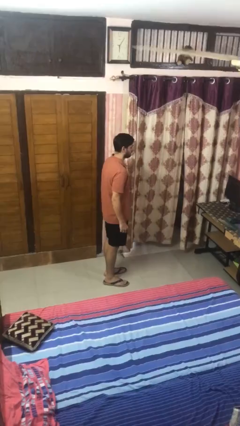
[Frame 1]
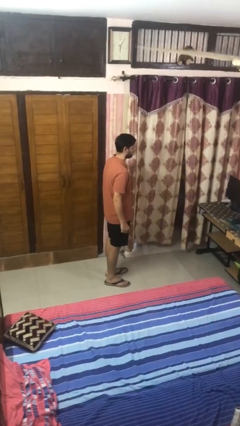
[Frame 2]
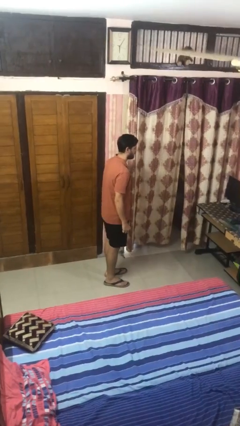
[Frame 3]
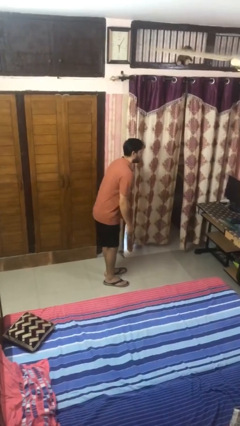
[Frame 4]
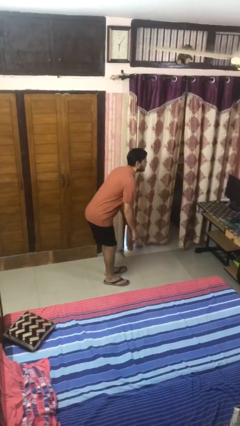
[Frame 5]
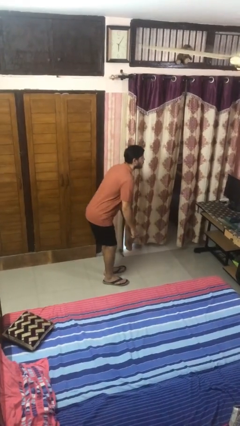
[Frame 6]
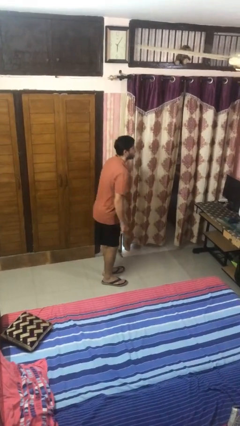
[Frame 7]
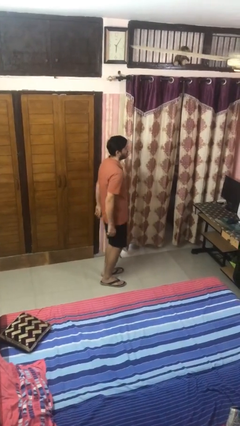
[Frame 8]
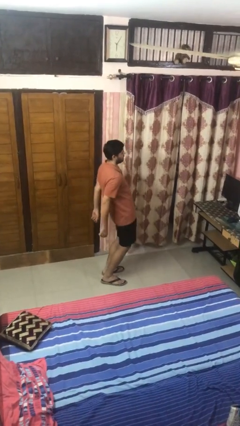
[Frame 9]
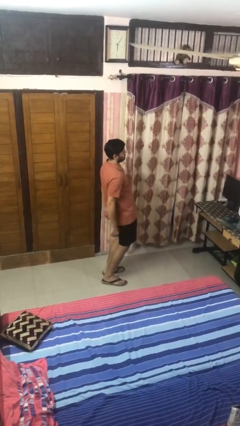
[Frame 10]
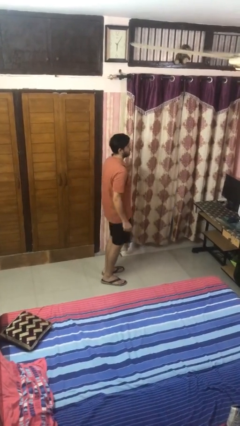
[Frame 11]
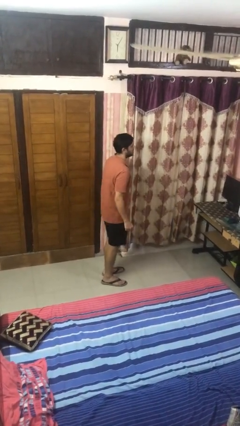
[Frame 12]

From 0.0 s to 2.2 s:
person wiggles hips

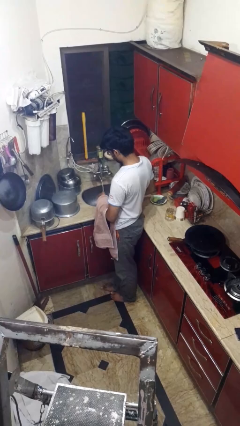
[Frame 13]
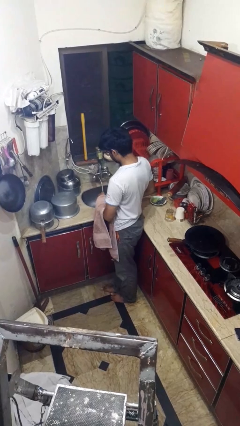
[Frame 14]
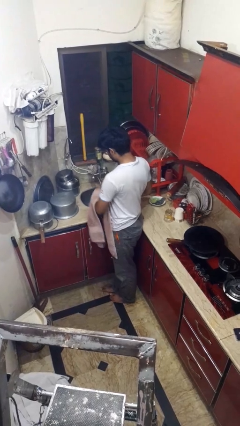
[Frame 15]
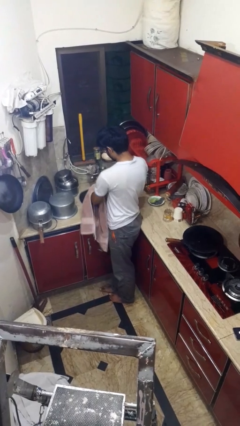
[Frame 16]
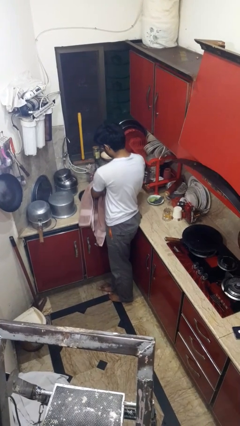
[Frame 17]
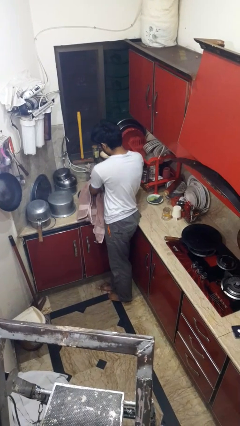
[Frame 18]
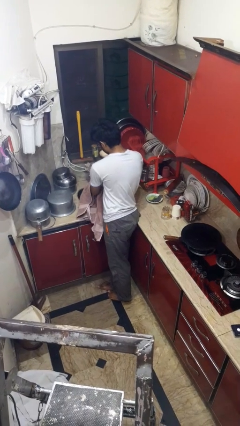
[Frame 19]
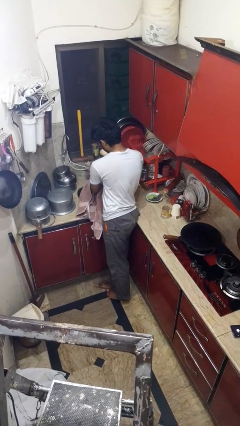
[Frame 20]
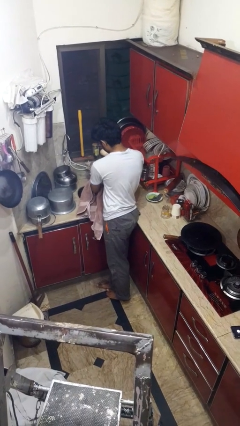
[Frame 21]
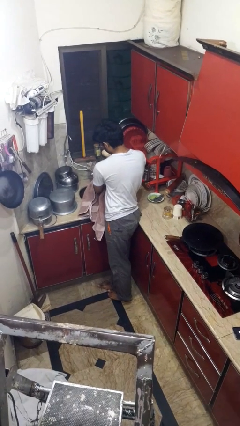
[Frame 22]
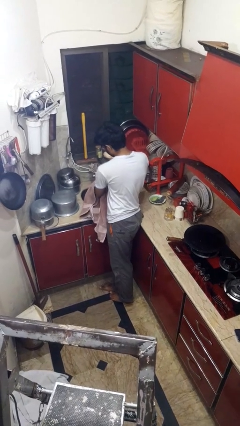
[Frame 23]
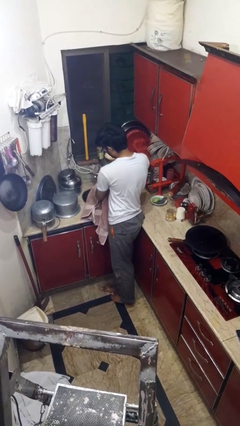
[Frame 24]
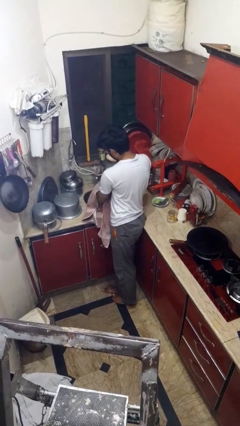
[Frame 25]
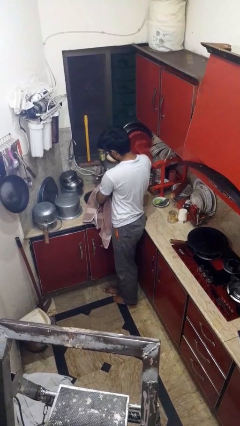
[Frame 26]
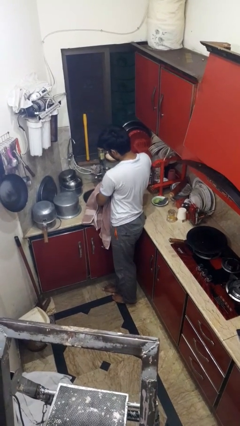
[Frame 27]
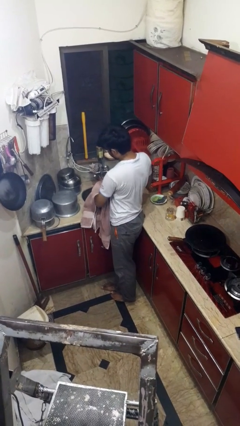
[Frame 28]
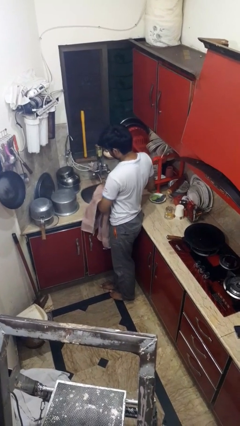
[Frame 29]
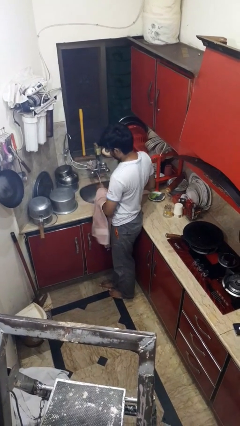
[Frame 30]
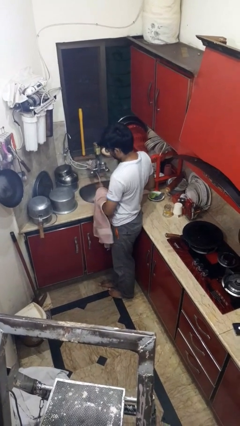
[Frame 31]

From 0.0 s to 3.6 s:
person washes hands

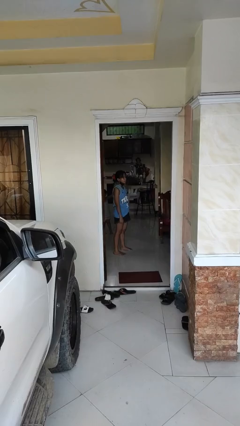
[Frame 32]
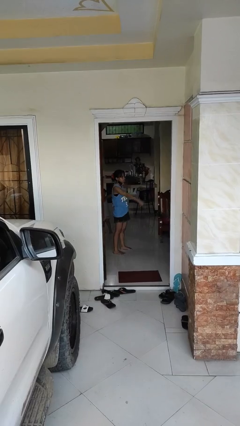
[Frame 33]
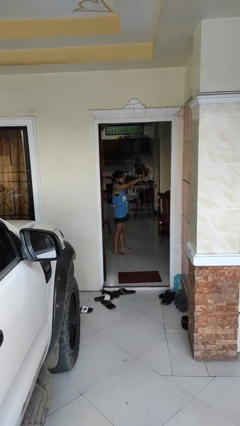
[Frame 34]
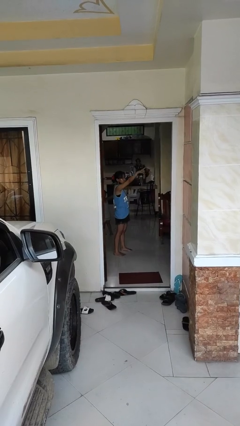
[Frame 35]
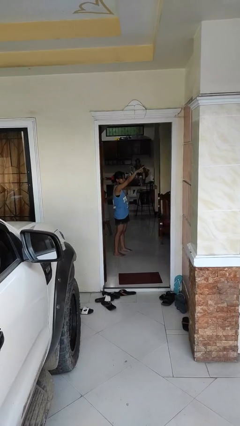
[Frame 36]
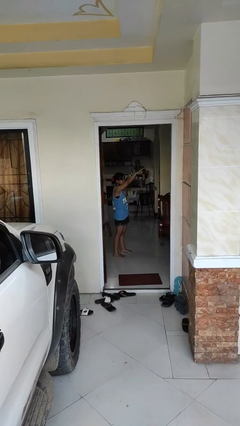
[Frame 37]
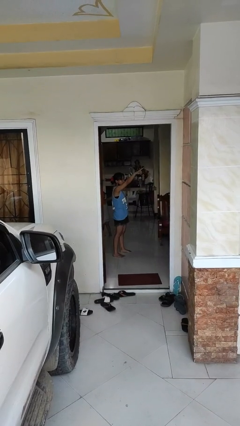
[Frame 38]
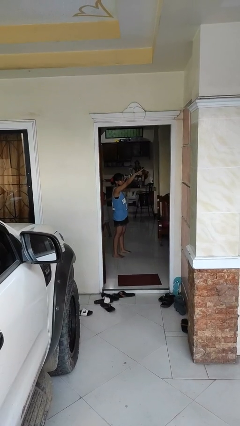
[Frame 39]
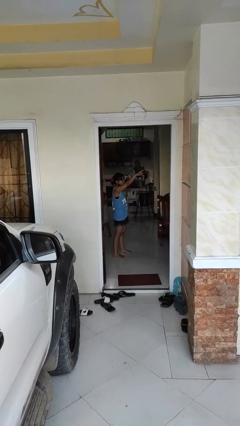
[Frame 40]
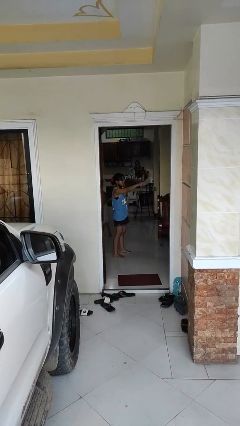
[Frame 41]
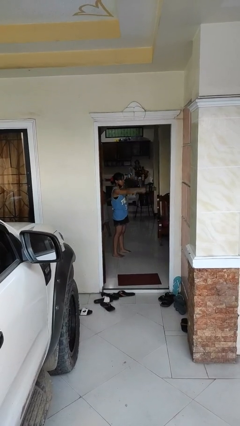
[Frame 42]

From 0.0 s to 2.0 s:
person points at person

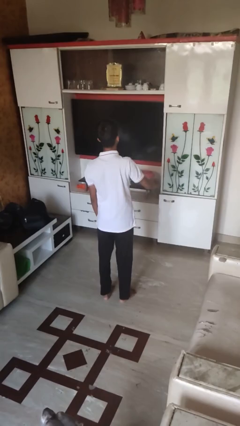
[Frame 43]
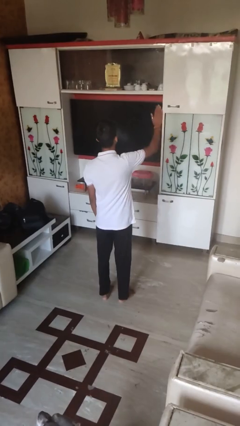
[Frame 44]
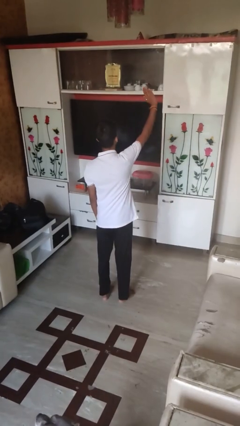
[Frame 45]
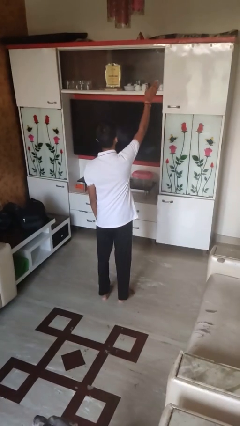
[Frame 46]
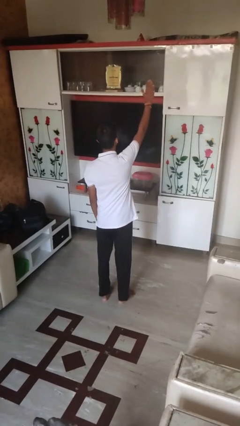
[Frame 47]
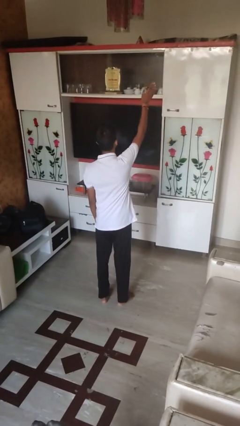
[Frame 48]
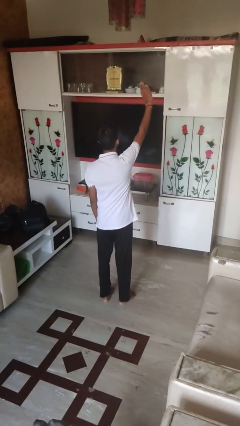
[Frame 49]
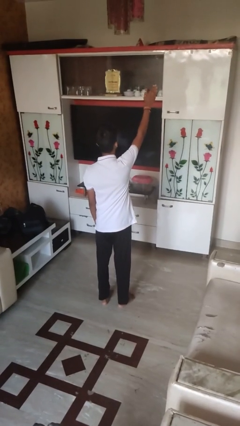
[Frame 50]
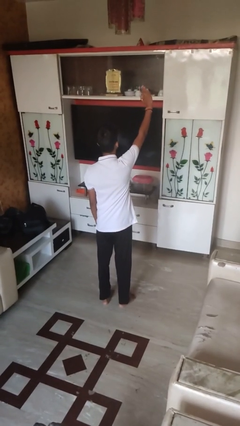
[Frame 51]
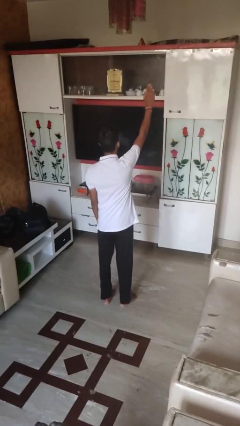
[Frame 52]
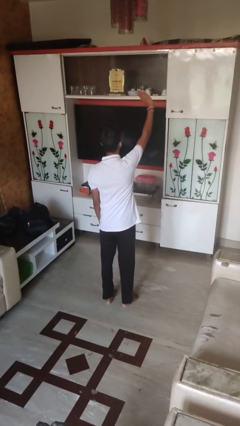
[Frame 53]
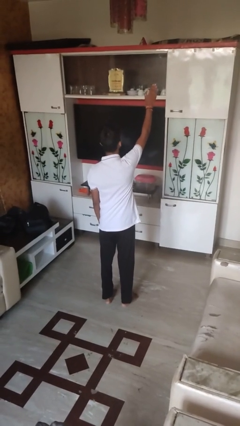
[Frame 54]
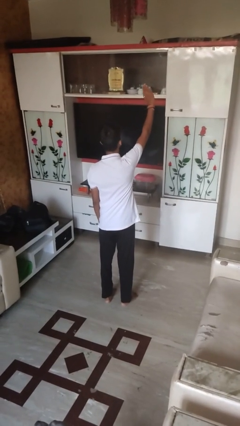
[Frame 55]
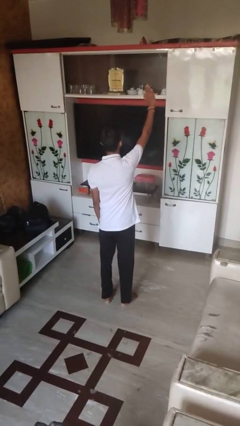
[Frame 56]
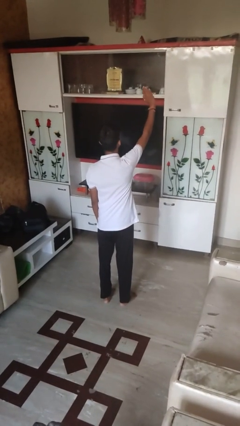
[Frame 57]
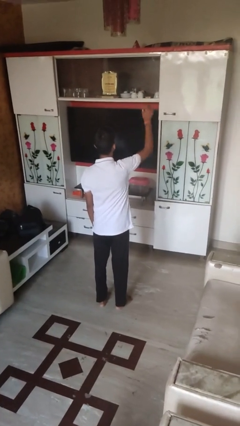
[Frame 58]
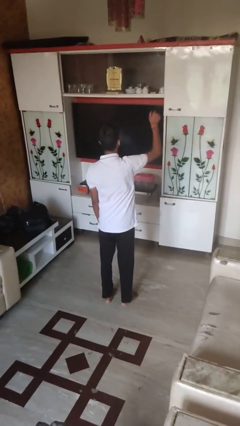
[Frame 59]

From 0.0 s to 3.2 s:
person waves at person

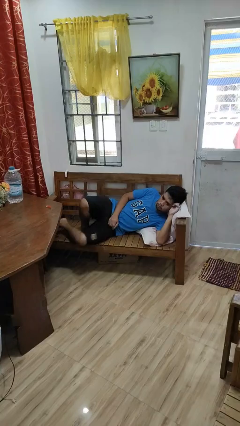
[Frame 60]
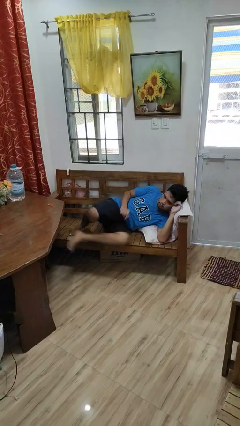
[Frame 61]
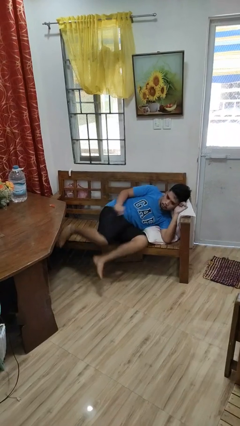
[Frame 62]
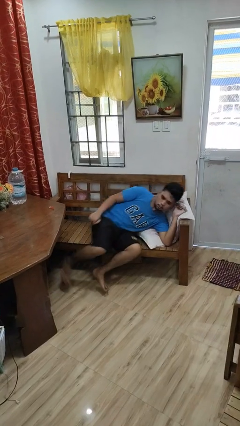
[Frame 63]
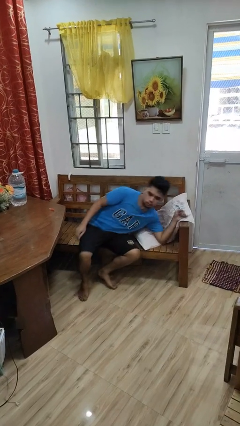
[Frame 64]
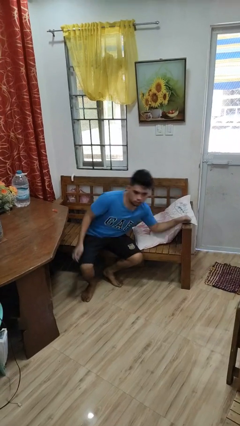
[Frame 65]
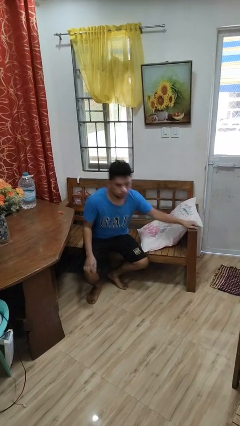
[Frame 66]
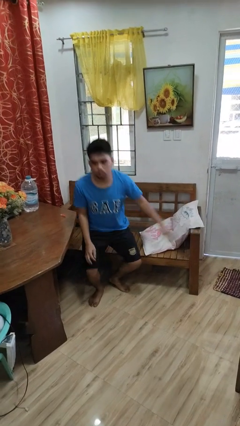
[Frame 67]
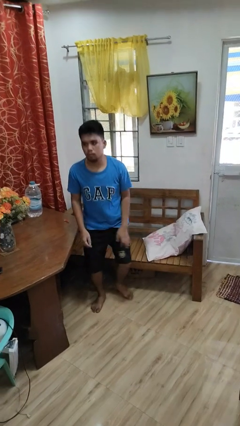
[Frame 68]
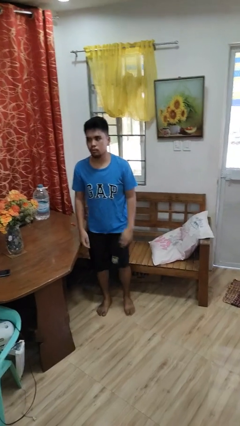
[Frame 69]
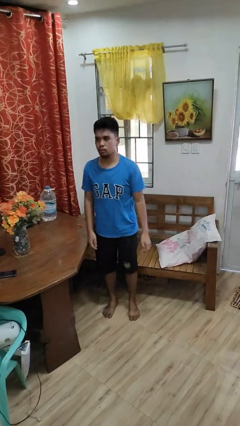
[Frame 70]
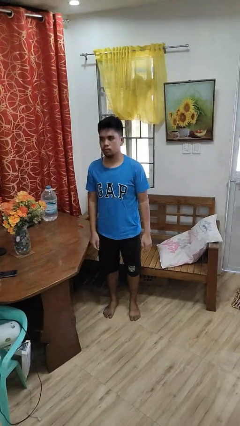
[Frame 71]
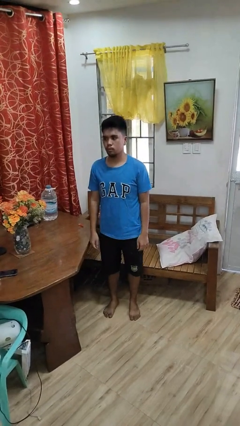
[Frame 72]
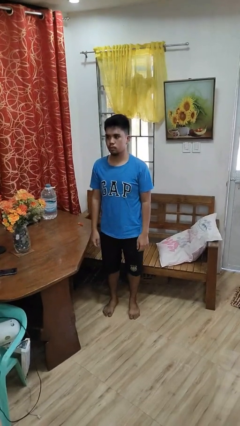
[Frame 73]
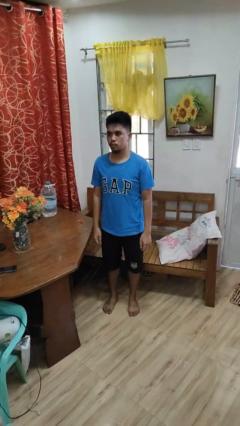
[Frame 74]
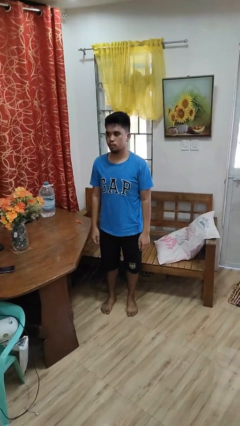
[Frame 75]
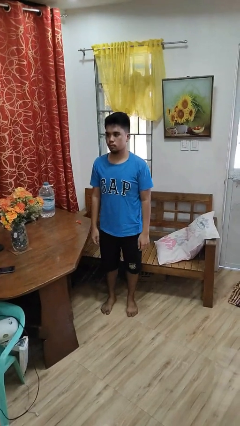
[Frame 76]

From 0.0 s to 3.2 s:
person stands up

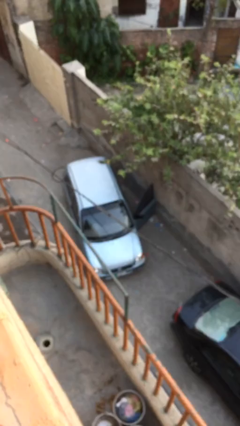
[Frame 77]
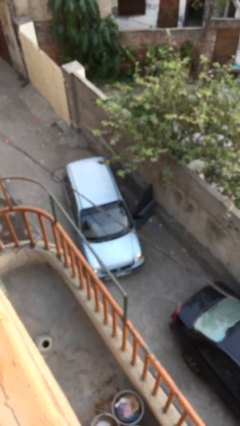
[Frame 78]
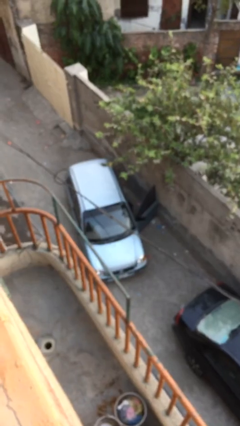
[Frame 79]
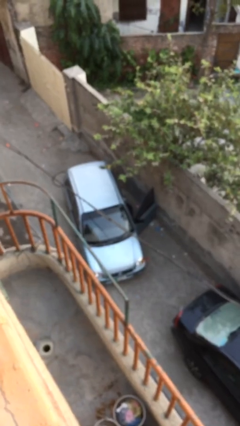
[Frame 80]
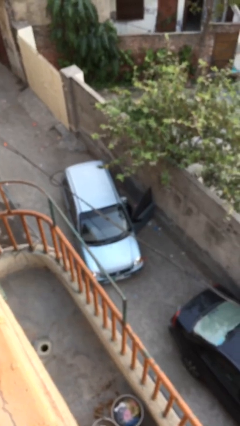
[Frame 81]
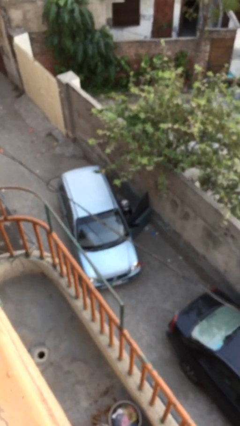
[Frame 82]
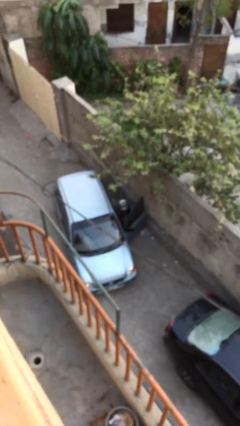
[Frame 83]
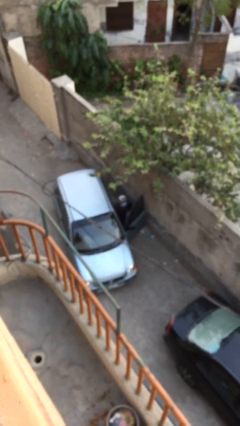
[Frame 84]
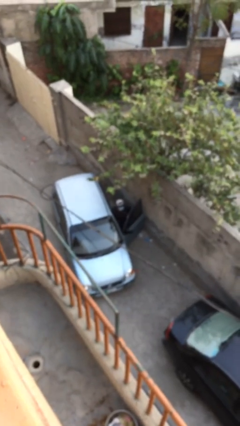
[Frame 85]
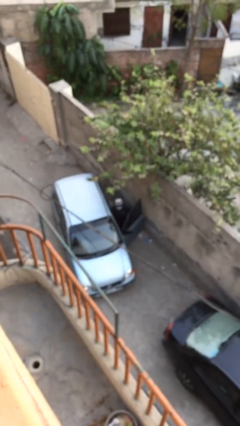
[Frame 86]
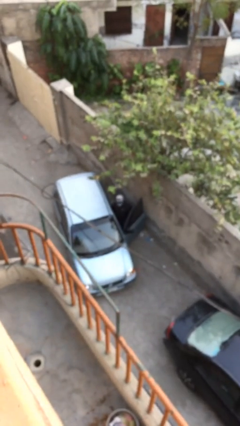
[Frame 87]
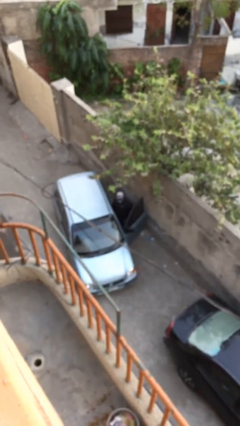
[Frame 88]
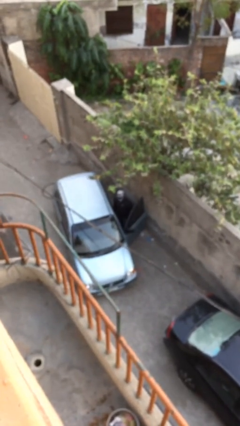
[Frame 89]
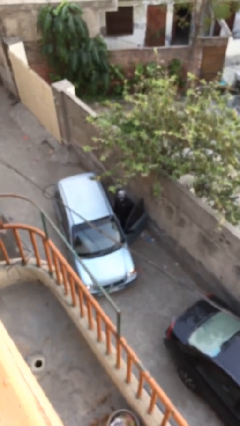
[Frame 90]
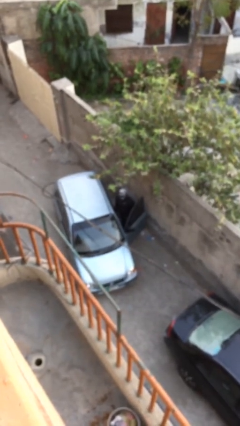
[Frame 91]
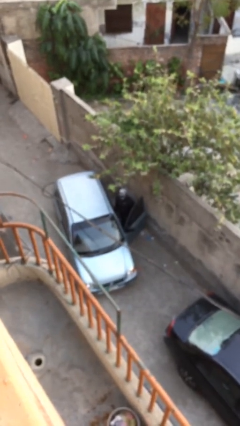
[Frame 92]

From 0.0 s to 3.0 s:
person exits car
